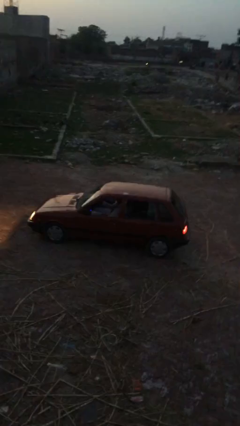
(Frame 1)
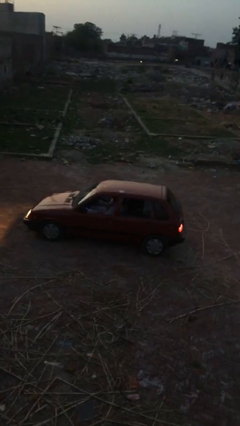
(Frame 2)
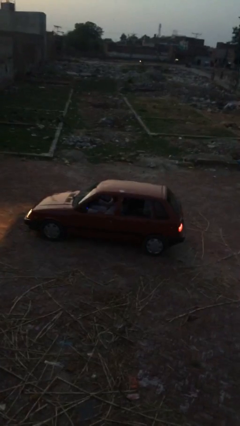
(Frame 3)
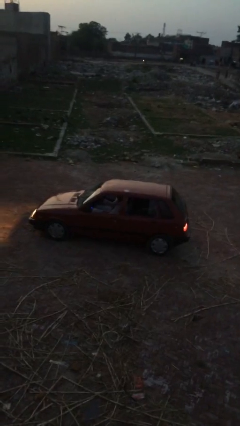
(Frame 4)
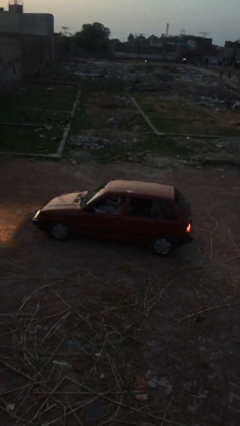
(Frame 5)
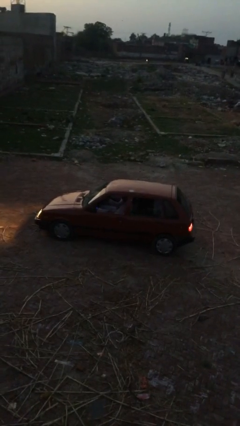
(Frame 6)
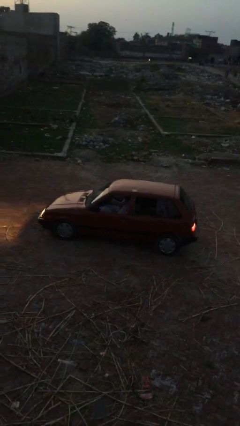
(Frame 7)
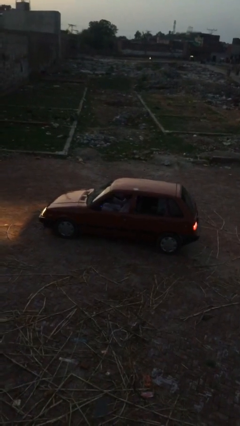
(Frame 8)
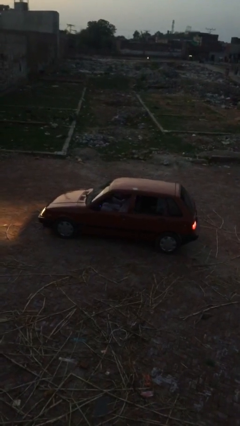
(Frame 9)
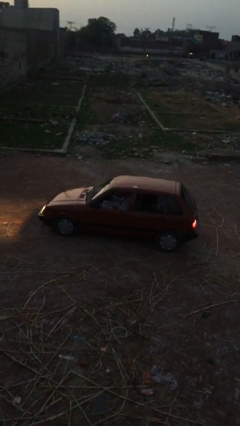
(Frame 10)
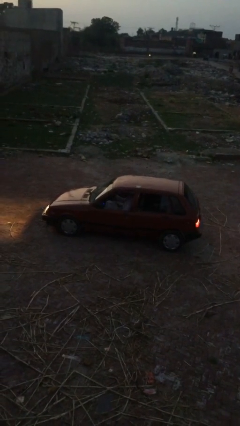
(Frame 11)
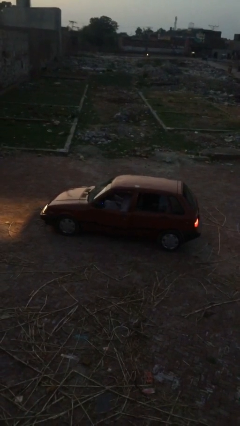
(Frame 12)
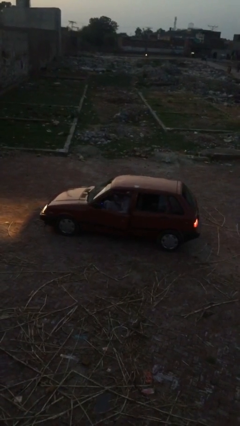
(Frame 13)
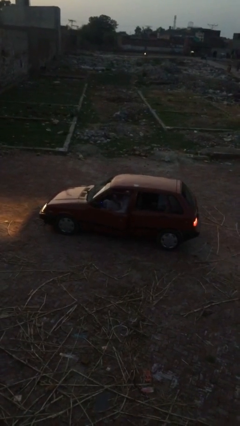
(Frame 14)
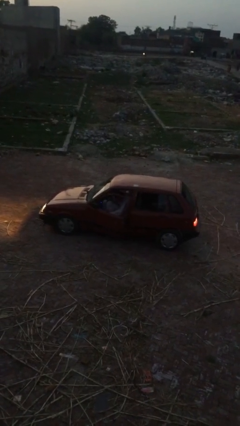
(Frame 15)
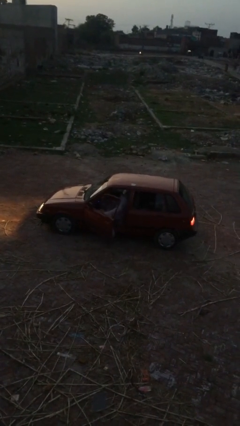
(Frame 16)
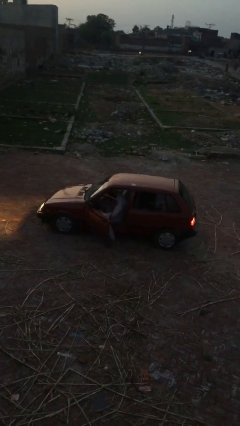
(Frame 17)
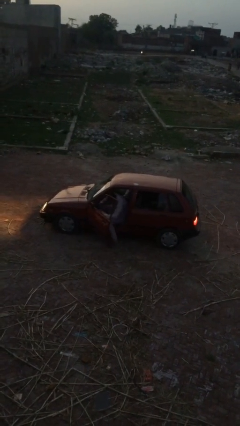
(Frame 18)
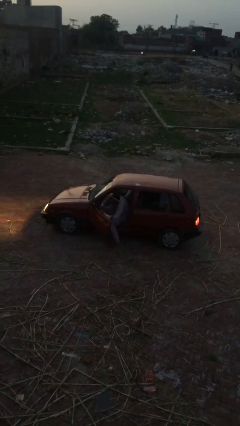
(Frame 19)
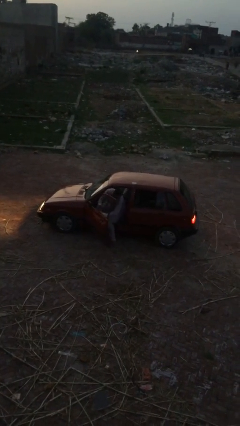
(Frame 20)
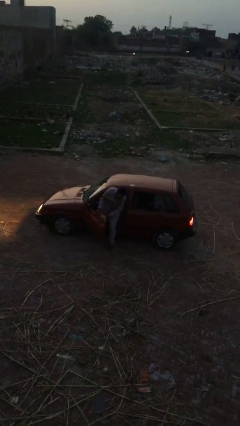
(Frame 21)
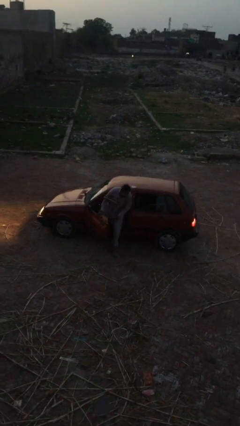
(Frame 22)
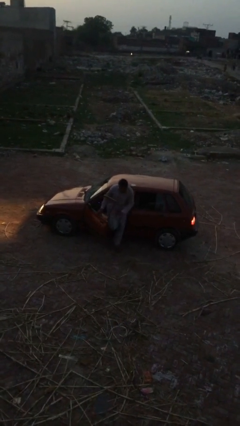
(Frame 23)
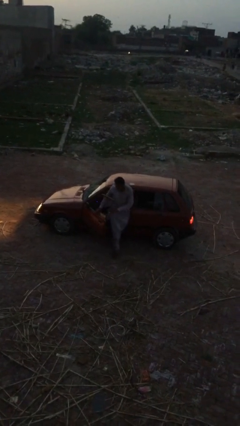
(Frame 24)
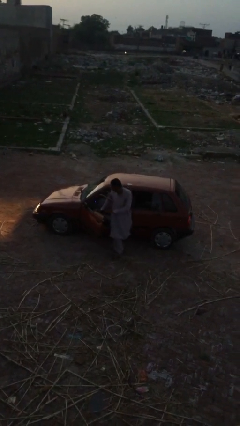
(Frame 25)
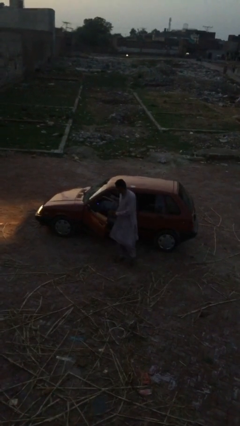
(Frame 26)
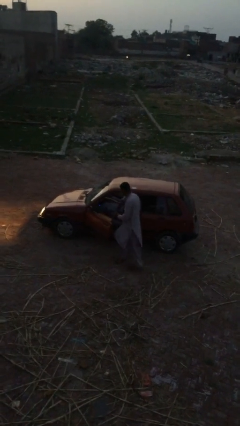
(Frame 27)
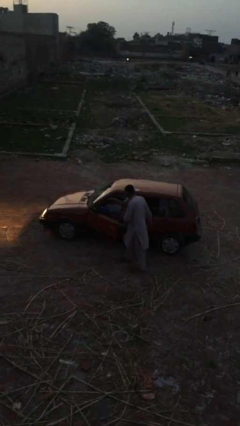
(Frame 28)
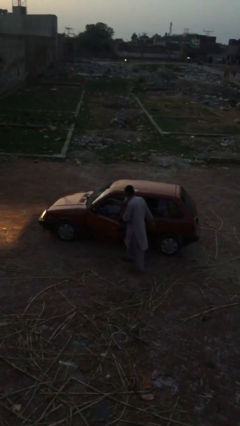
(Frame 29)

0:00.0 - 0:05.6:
car drops off person

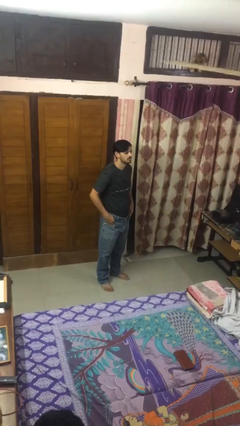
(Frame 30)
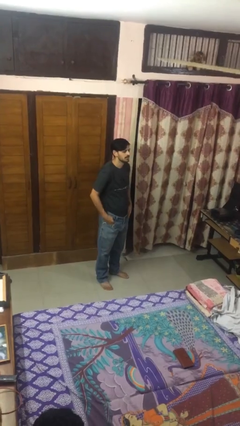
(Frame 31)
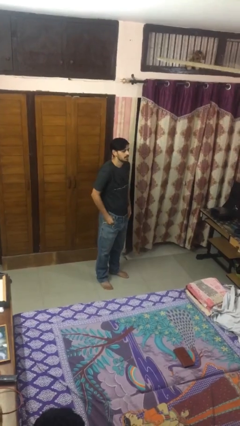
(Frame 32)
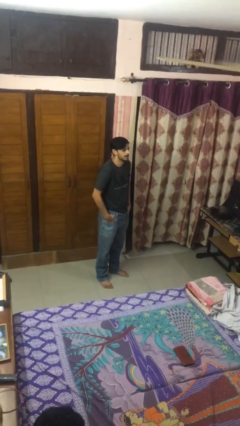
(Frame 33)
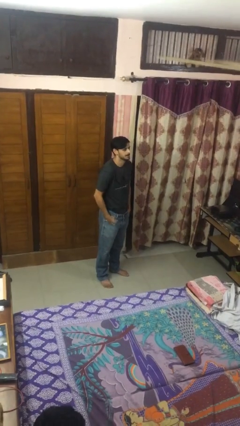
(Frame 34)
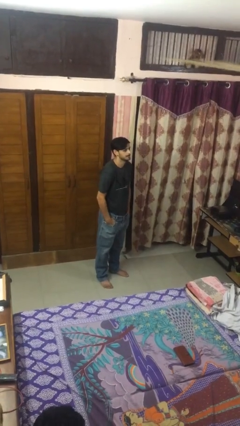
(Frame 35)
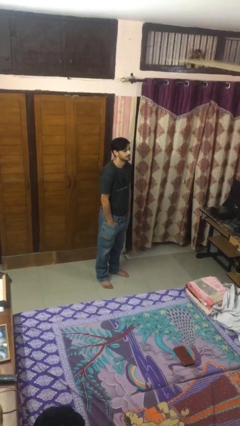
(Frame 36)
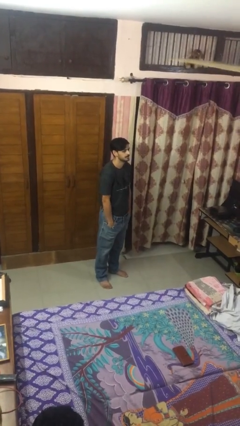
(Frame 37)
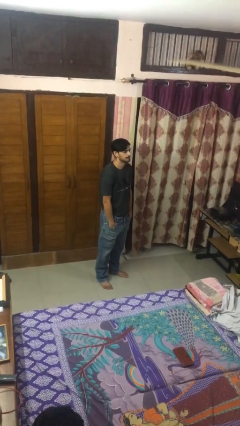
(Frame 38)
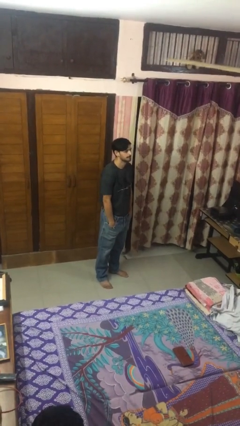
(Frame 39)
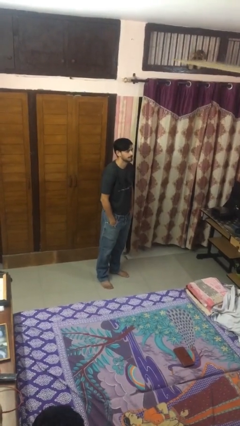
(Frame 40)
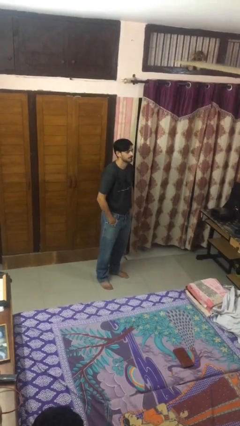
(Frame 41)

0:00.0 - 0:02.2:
person puts hands in back pockets

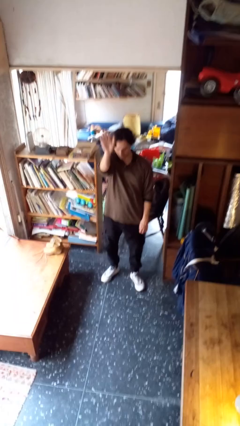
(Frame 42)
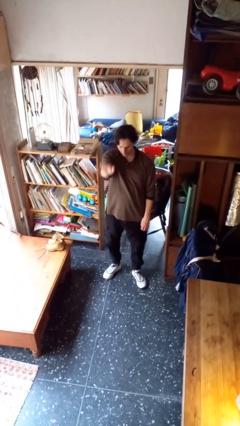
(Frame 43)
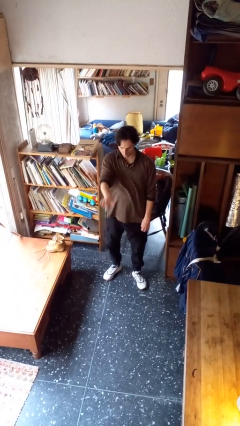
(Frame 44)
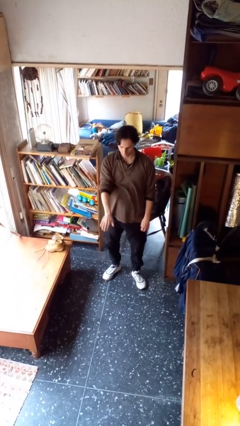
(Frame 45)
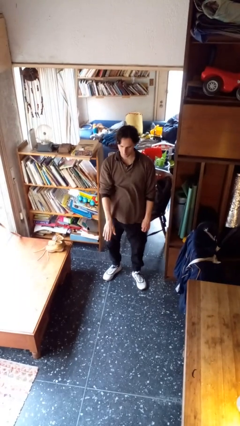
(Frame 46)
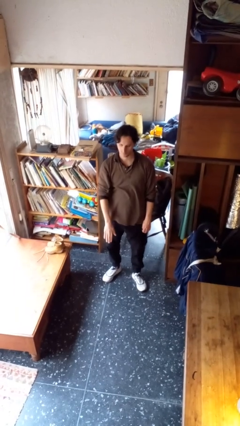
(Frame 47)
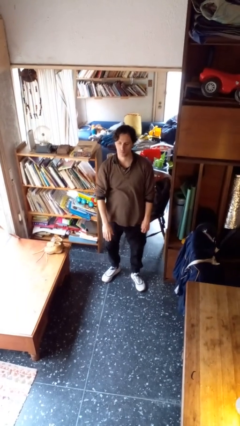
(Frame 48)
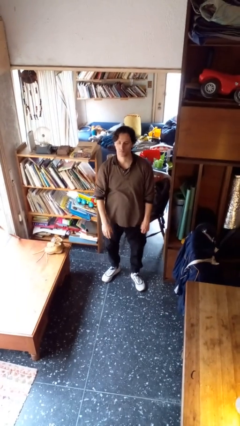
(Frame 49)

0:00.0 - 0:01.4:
person gestures swipe down

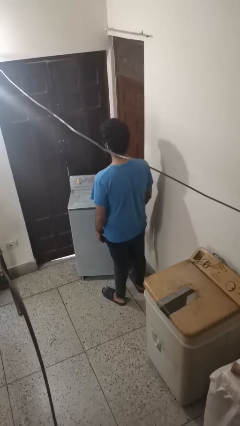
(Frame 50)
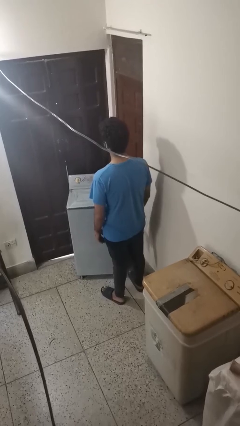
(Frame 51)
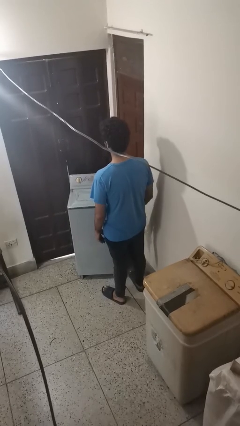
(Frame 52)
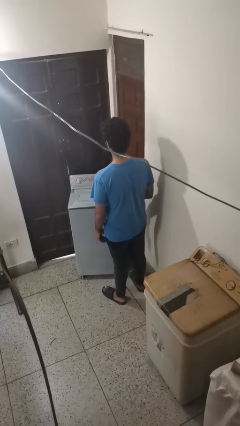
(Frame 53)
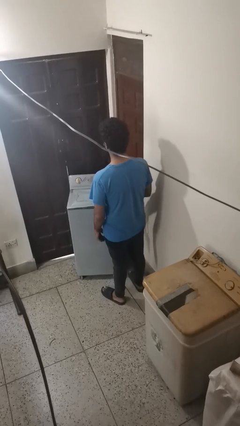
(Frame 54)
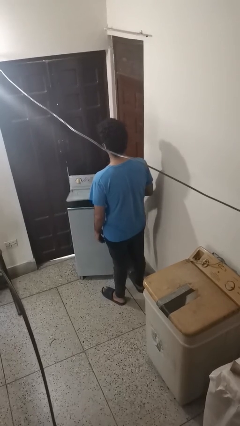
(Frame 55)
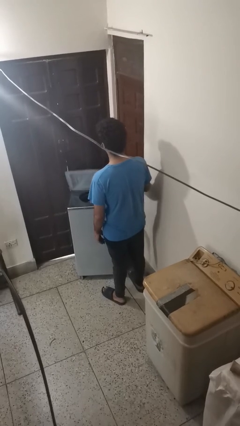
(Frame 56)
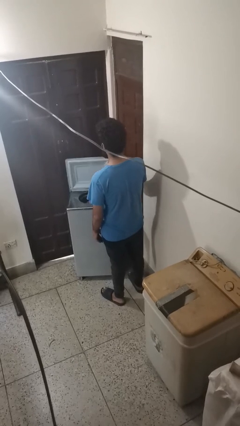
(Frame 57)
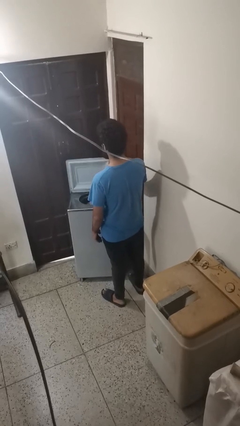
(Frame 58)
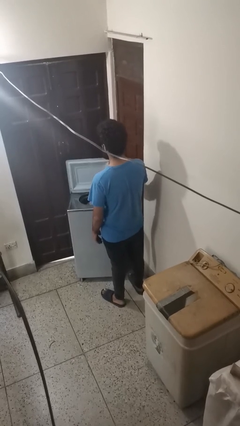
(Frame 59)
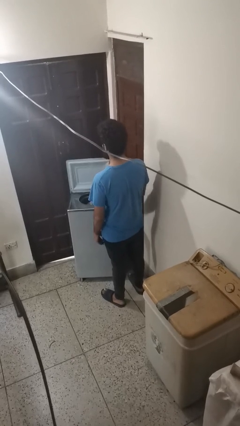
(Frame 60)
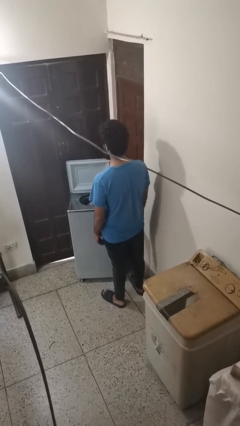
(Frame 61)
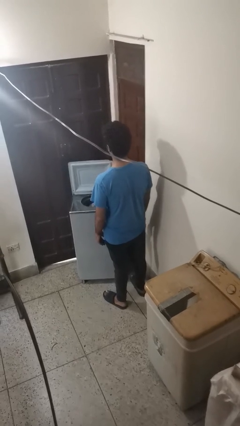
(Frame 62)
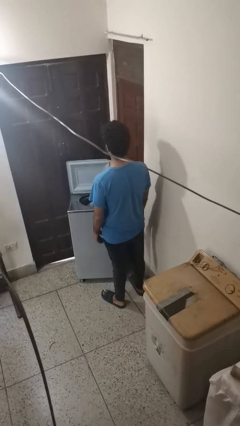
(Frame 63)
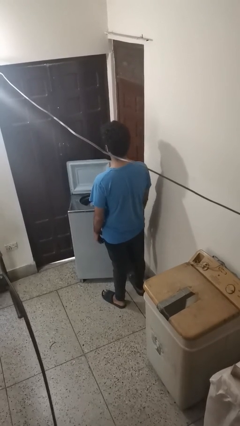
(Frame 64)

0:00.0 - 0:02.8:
person opens clothes washer

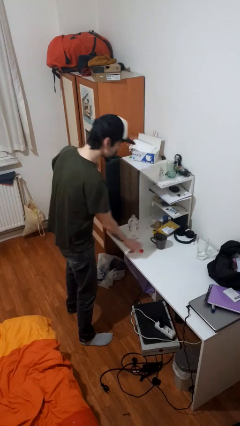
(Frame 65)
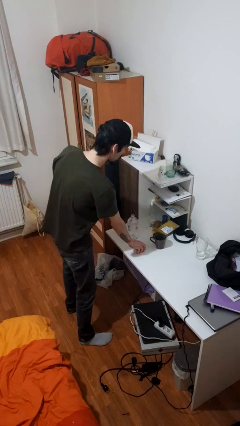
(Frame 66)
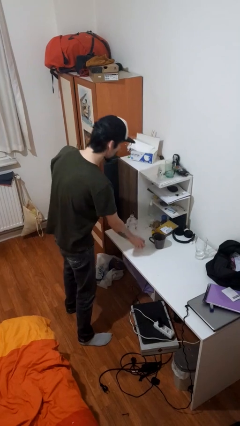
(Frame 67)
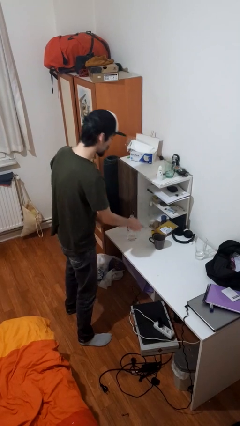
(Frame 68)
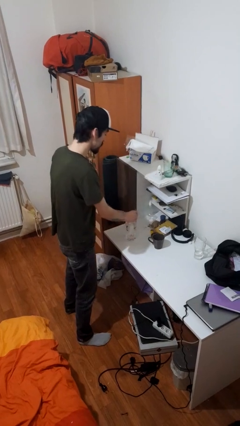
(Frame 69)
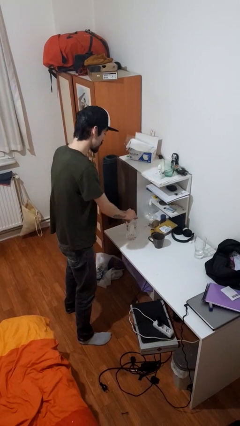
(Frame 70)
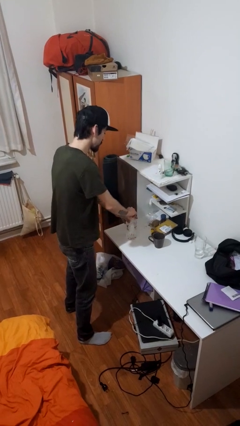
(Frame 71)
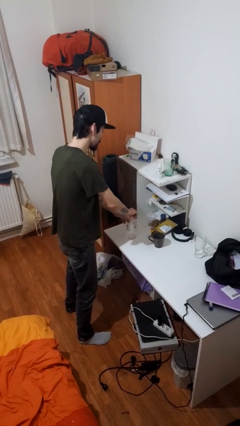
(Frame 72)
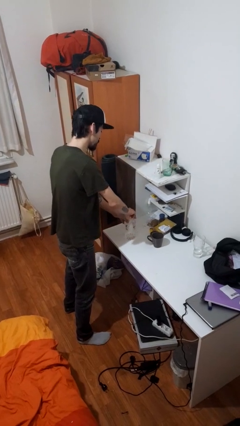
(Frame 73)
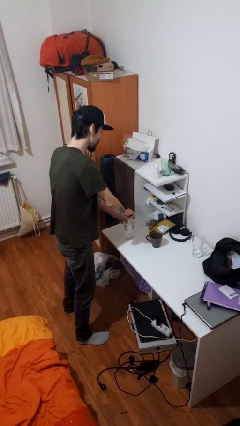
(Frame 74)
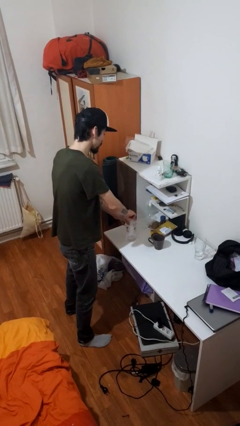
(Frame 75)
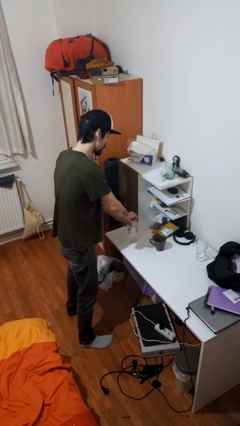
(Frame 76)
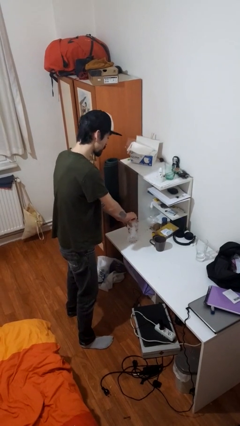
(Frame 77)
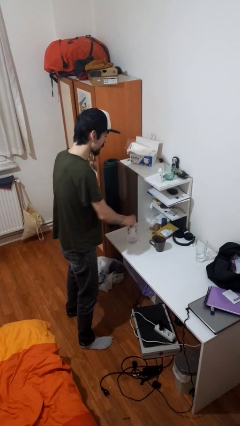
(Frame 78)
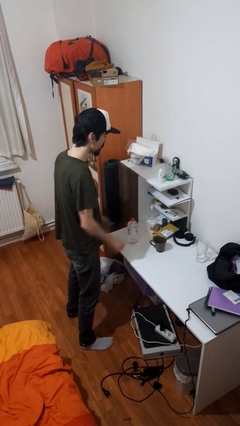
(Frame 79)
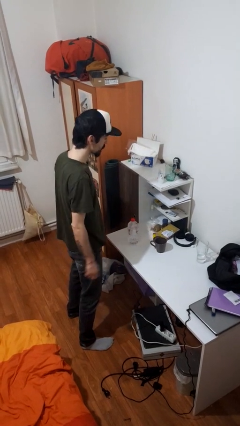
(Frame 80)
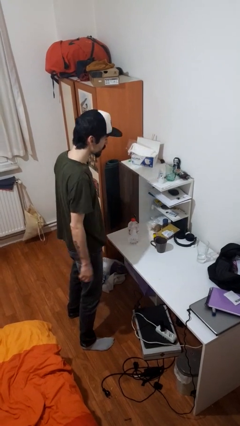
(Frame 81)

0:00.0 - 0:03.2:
person screws lid to bottle

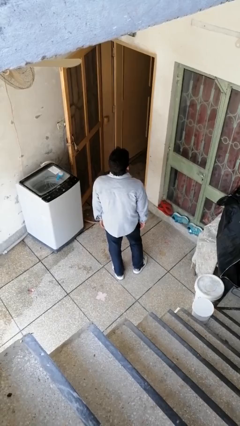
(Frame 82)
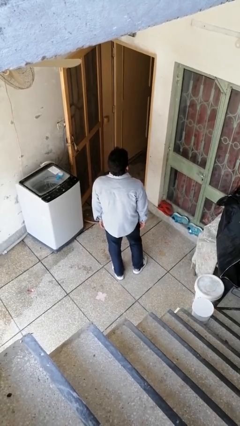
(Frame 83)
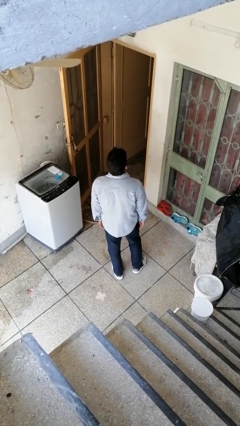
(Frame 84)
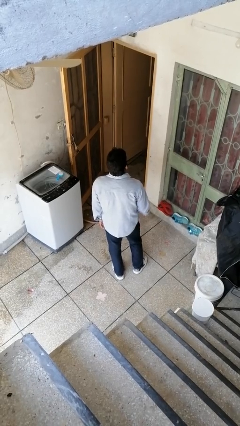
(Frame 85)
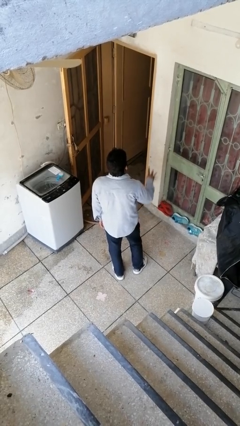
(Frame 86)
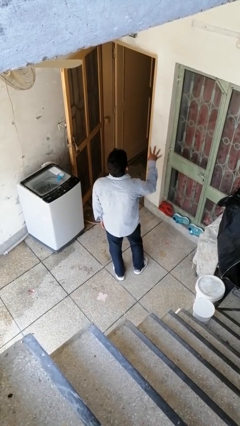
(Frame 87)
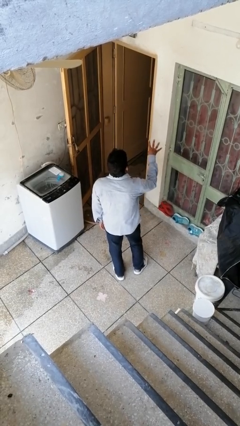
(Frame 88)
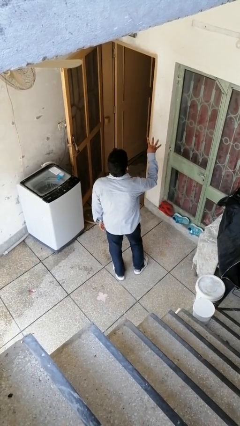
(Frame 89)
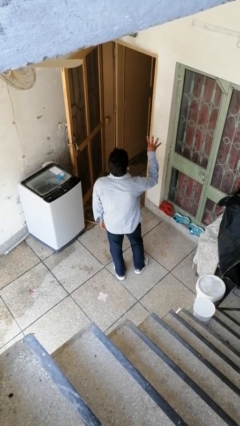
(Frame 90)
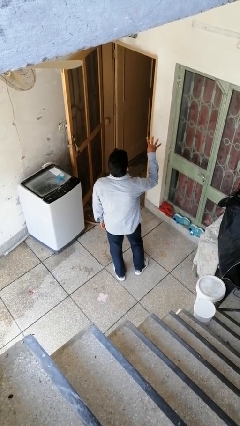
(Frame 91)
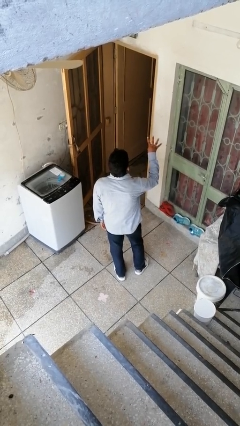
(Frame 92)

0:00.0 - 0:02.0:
person gestures number four

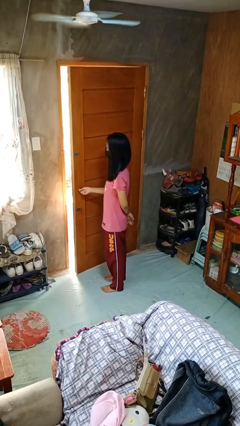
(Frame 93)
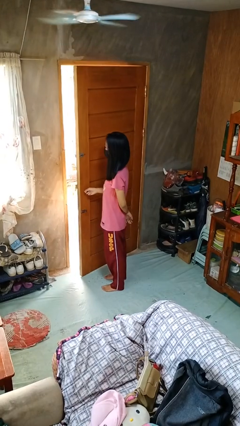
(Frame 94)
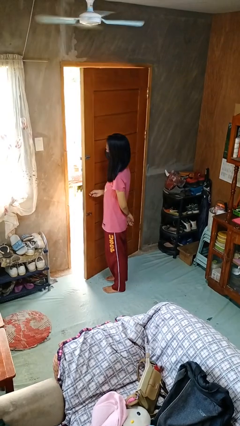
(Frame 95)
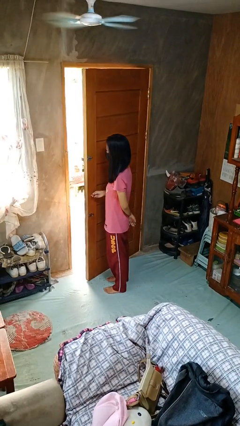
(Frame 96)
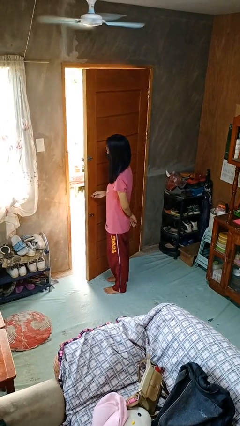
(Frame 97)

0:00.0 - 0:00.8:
person opens facility door
